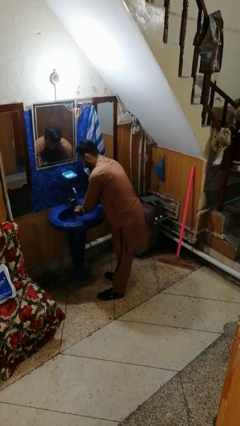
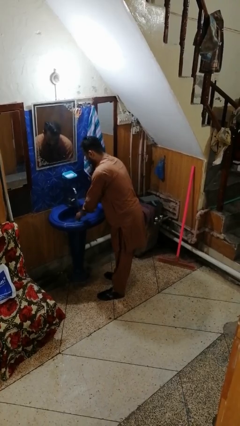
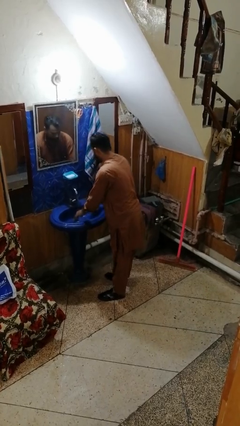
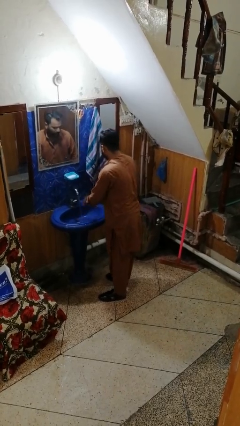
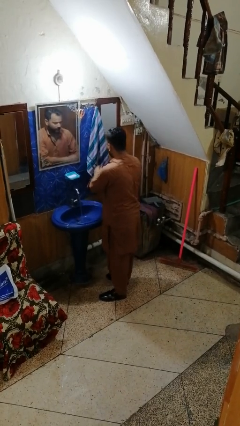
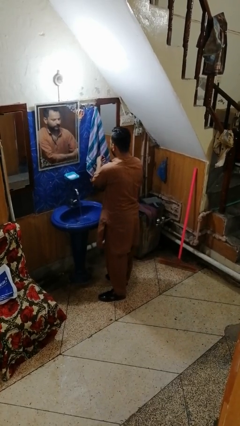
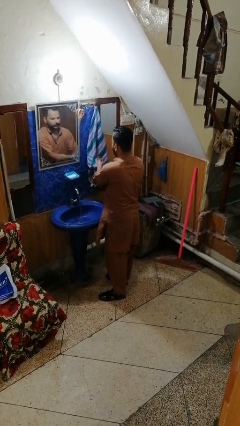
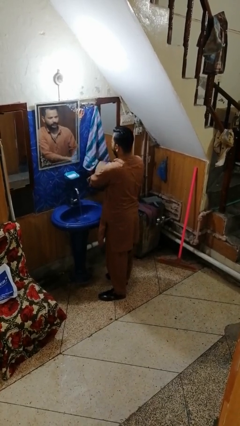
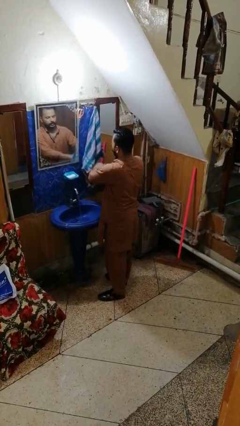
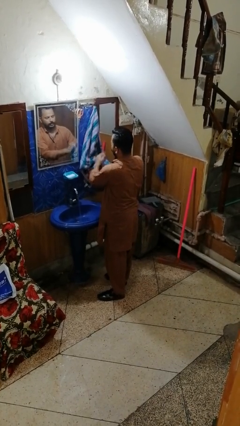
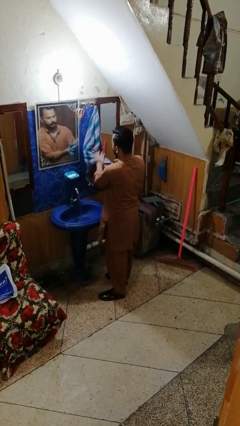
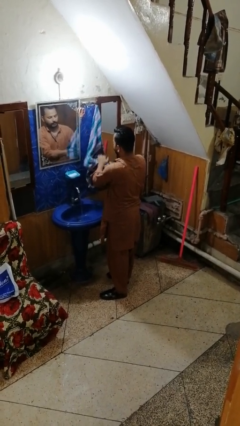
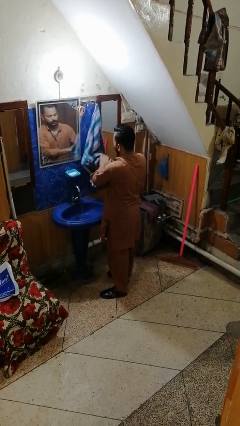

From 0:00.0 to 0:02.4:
person dries hands with towel

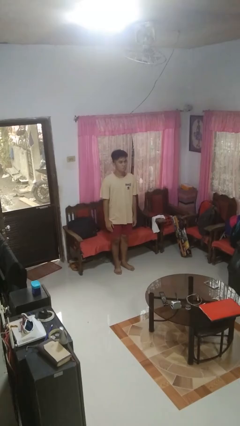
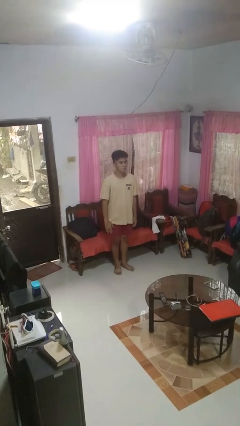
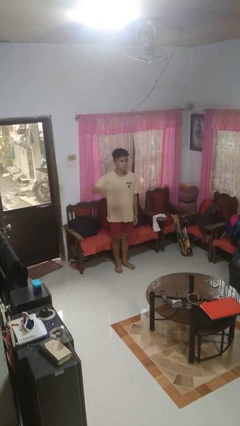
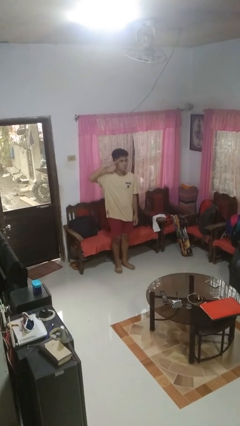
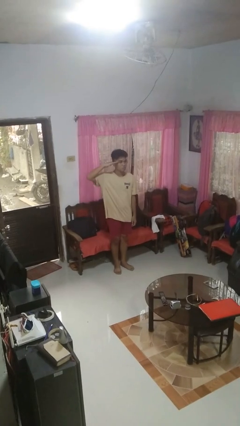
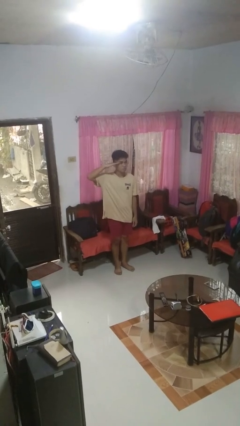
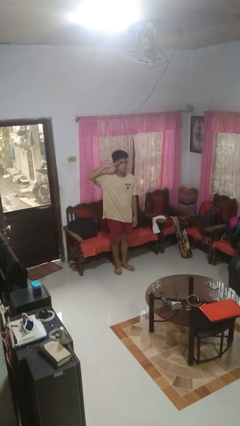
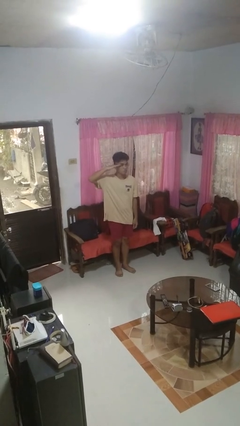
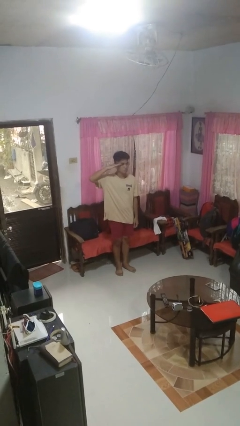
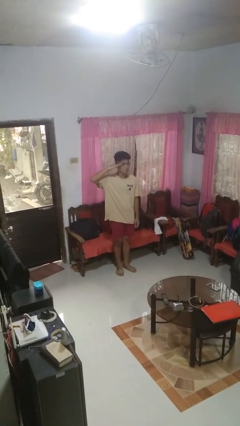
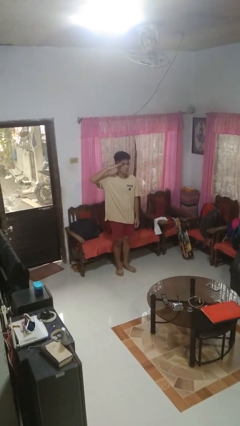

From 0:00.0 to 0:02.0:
person salutes

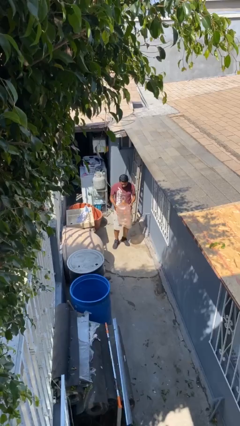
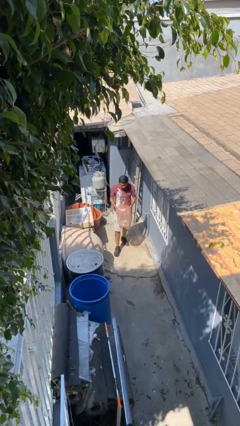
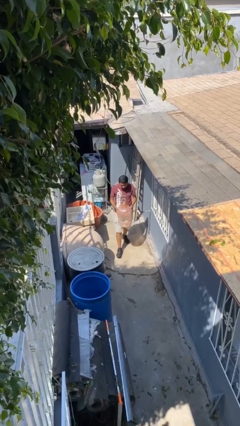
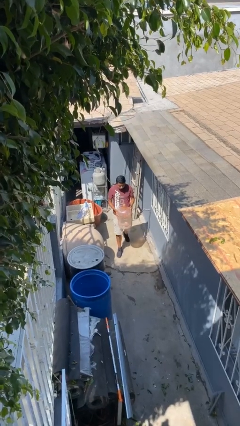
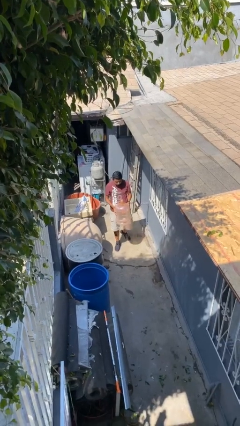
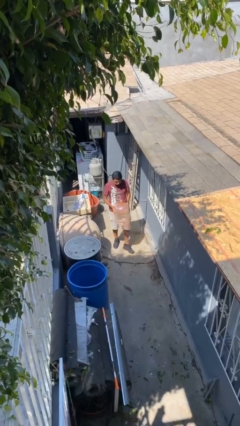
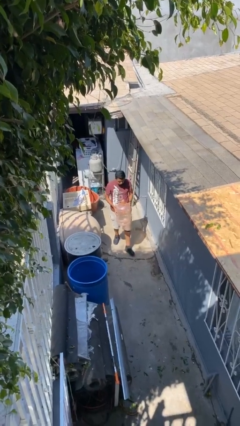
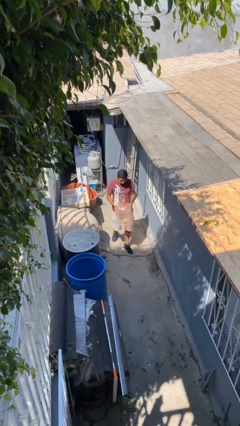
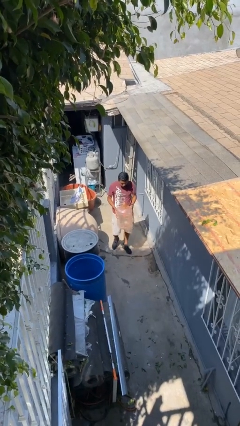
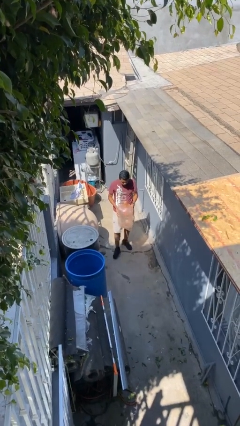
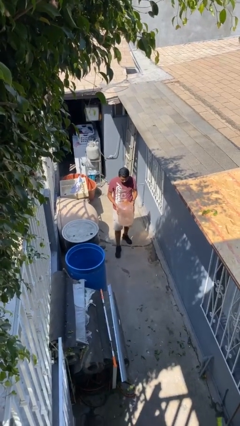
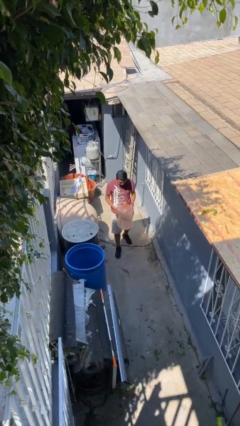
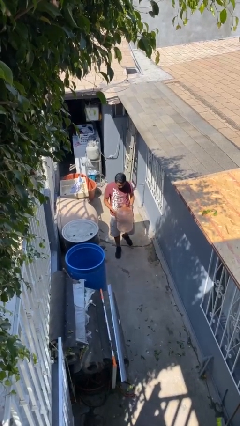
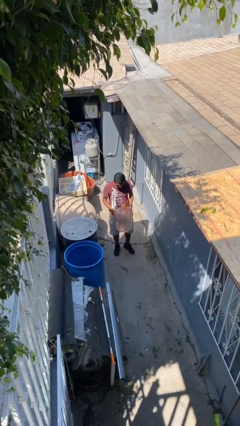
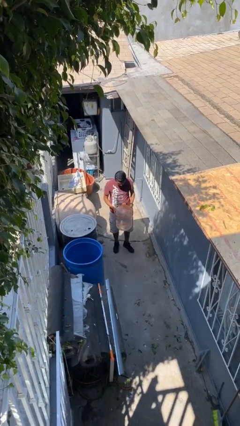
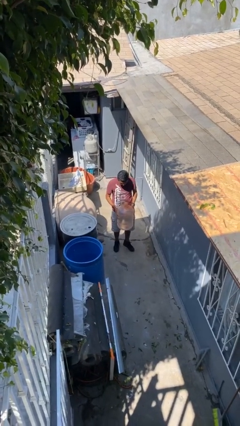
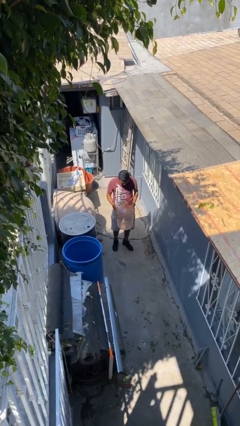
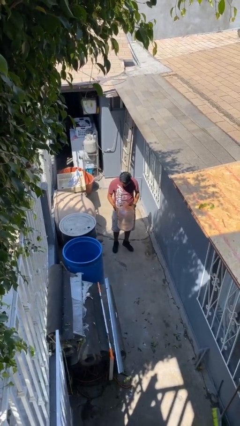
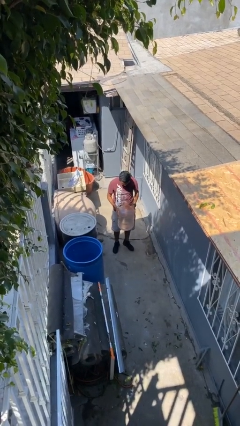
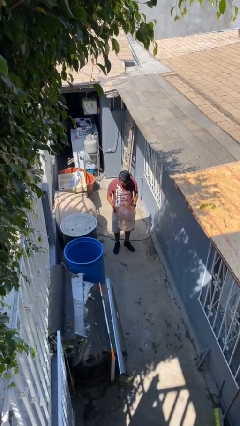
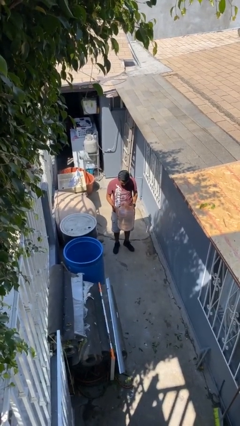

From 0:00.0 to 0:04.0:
person carries heavy object

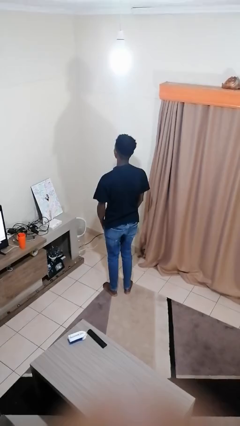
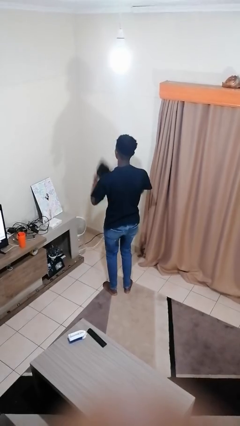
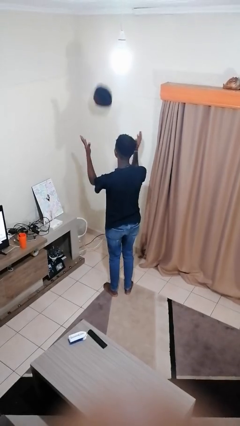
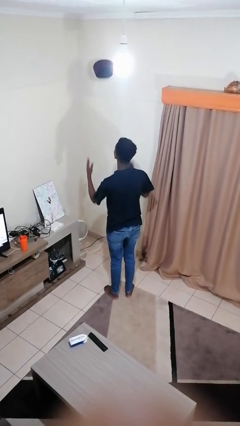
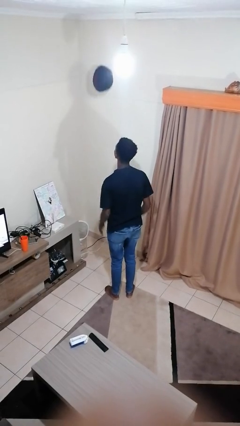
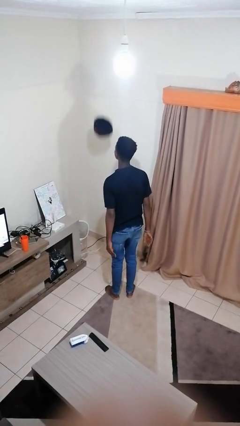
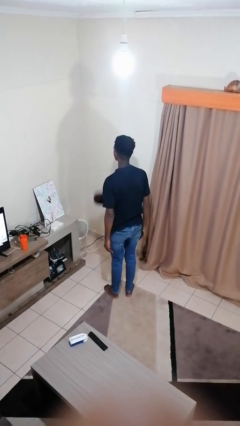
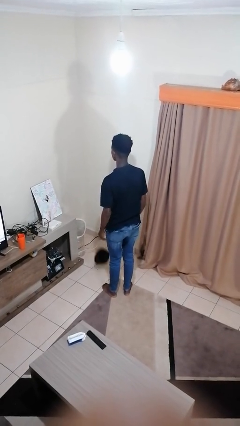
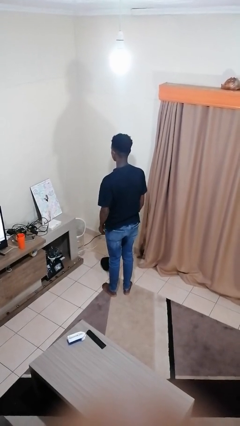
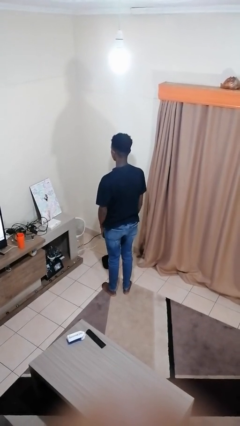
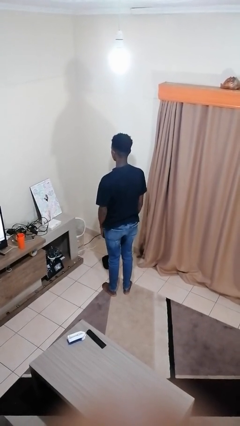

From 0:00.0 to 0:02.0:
person throws object into air

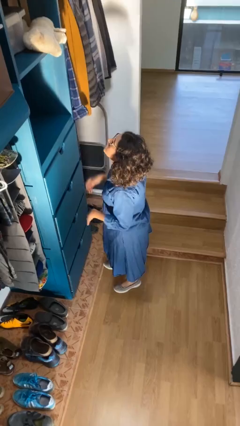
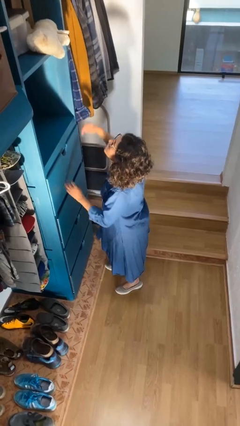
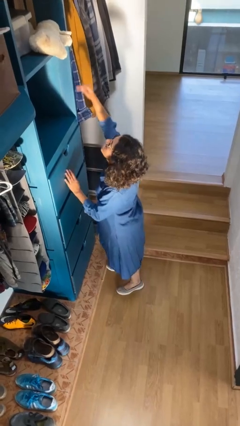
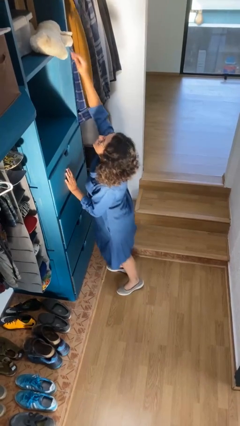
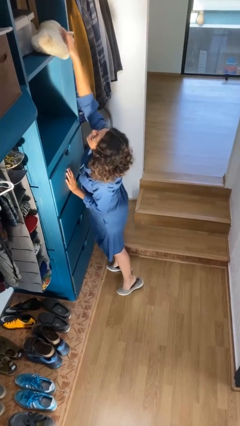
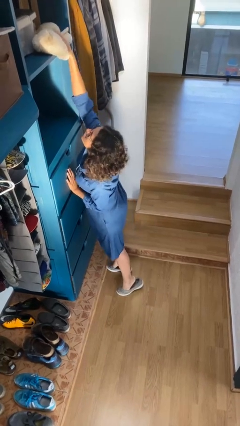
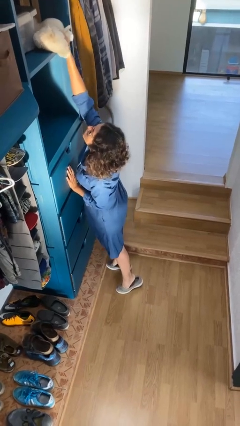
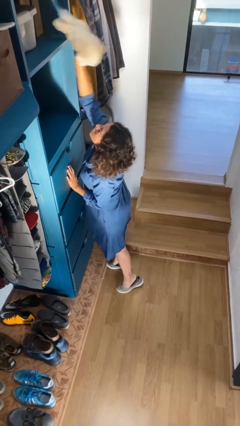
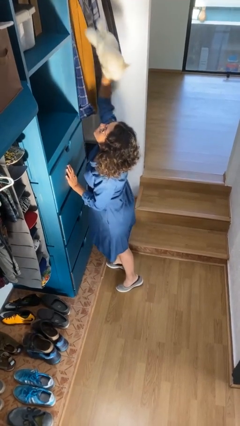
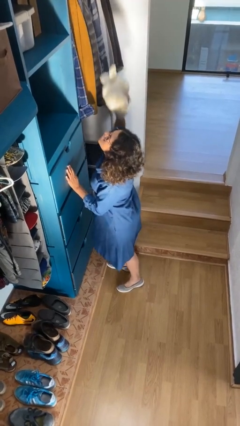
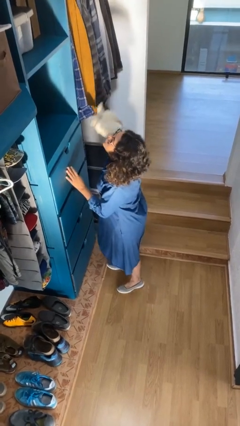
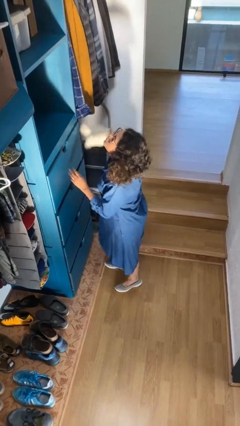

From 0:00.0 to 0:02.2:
person picks up object from shelf

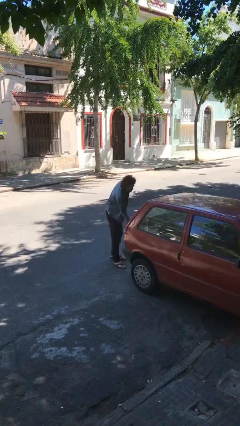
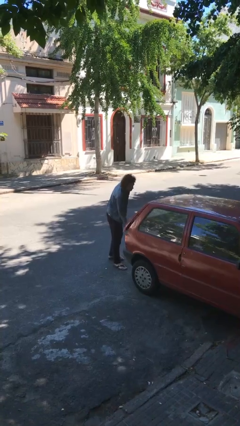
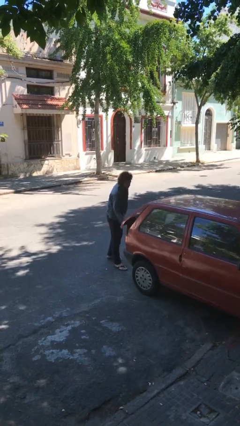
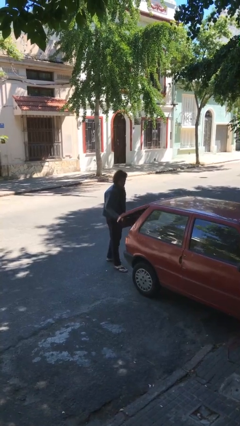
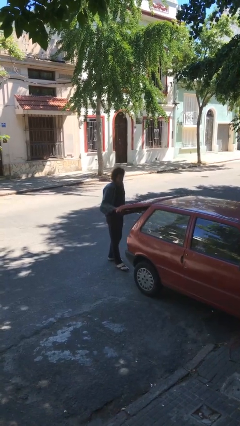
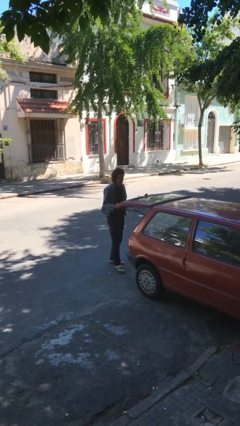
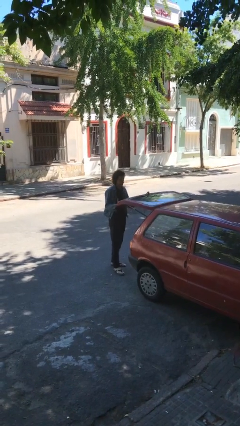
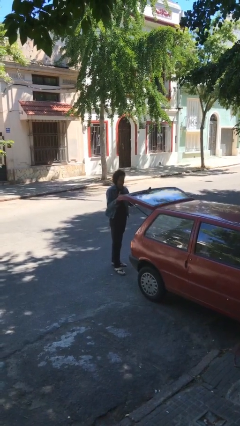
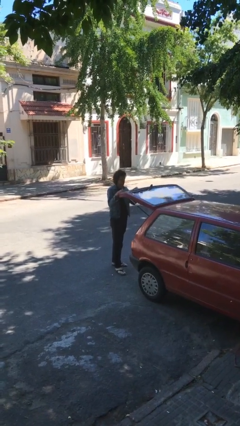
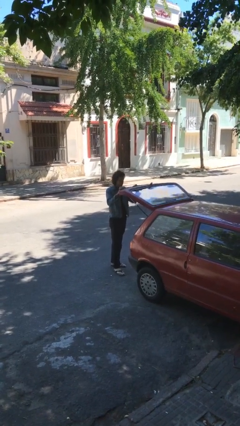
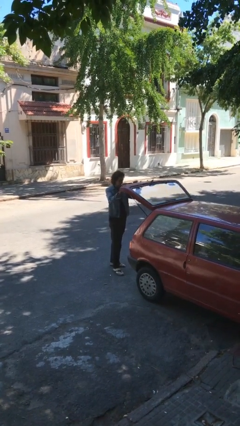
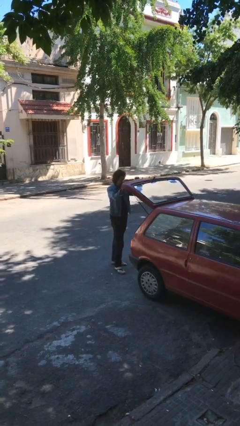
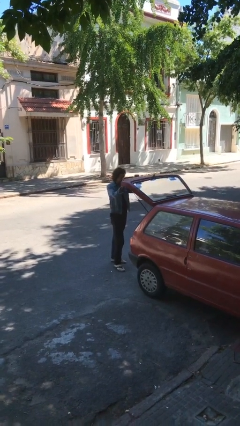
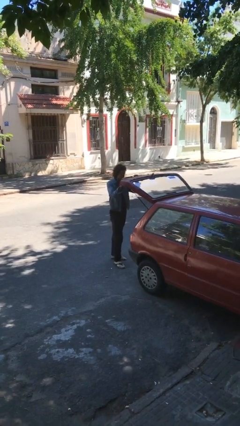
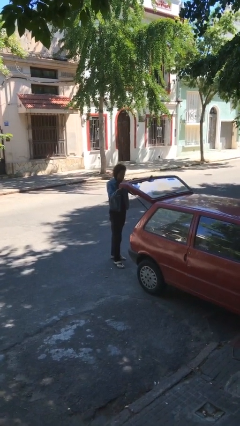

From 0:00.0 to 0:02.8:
person opens car trunk

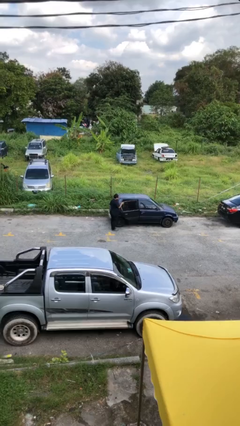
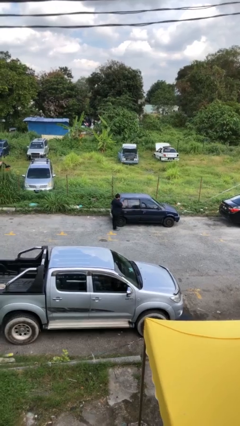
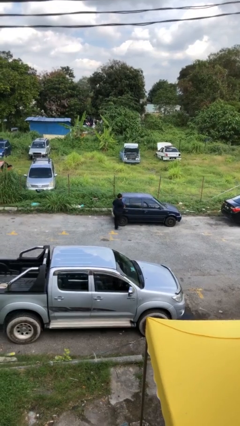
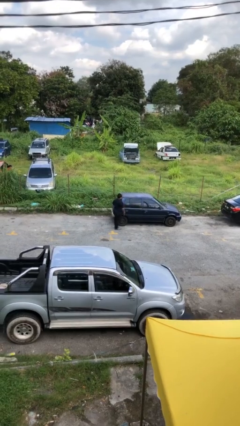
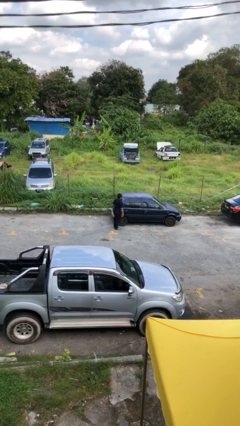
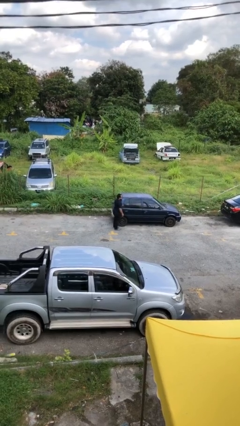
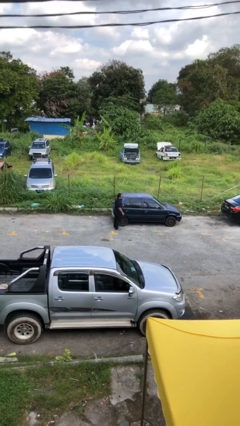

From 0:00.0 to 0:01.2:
person closes car door

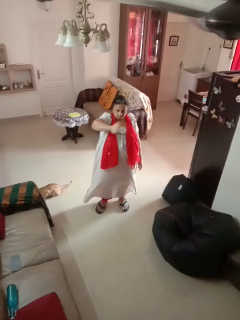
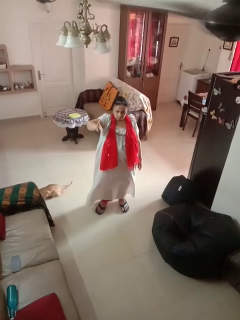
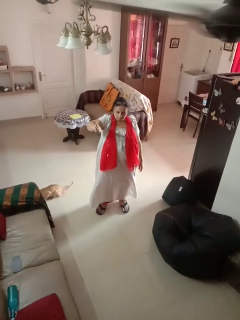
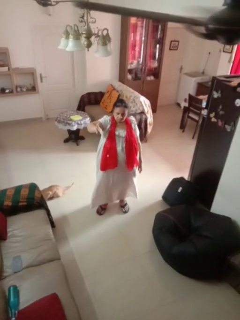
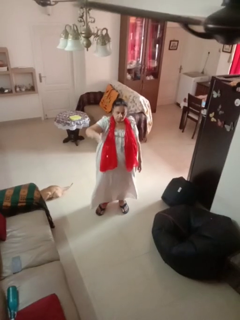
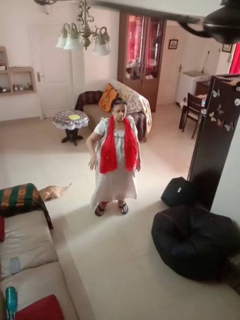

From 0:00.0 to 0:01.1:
person gestures swipe right
